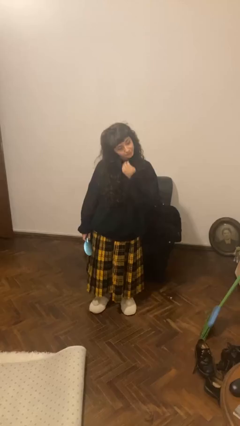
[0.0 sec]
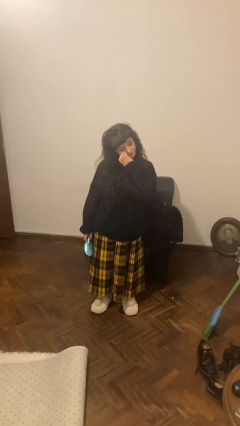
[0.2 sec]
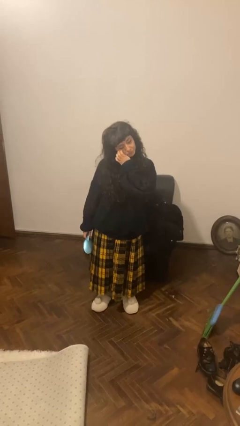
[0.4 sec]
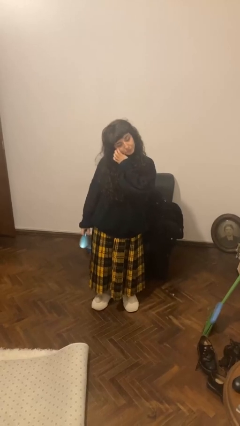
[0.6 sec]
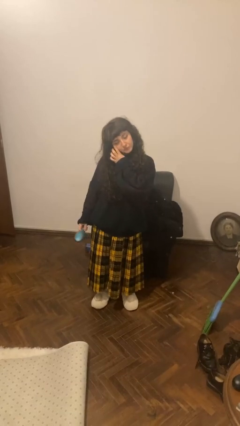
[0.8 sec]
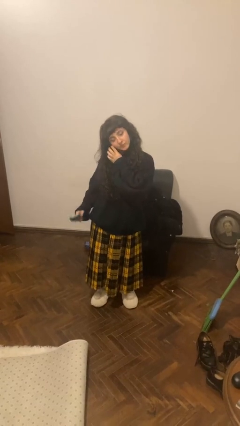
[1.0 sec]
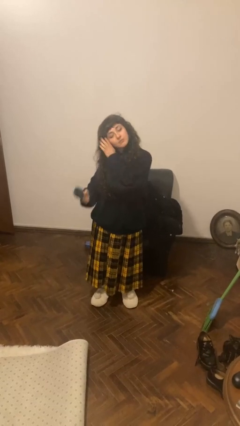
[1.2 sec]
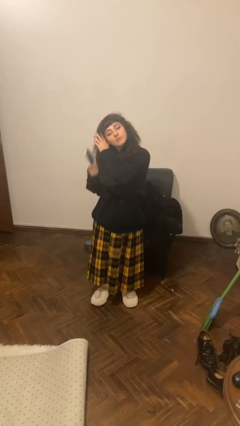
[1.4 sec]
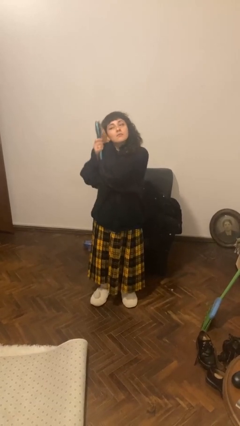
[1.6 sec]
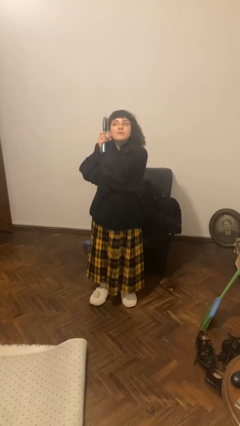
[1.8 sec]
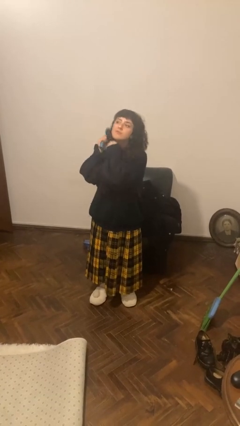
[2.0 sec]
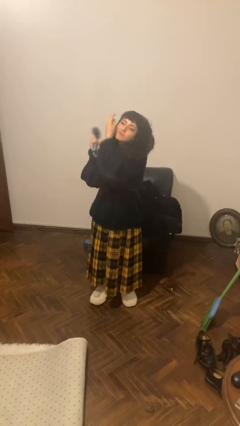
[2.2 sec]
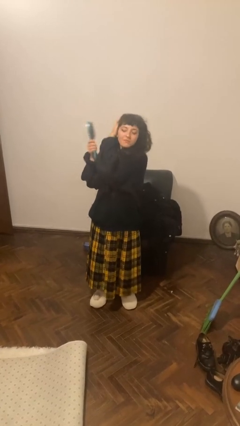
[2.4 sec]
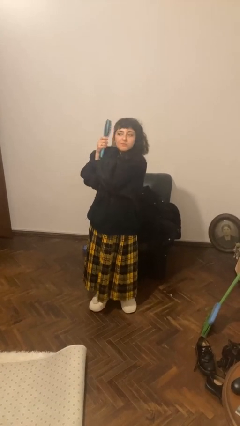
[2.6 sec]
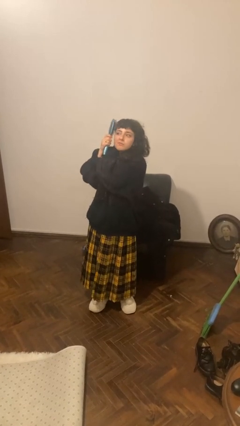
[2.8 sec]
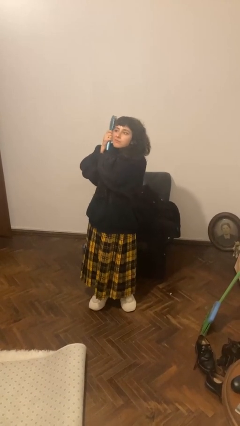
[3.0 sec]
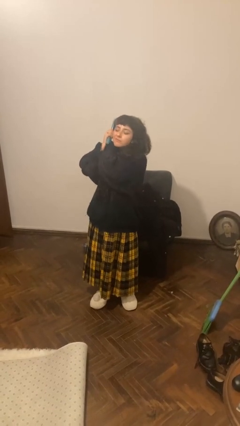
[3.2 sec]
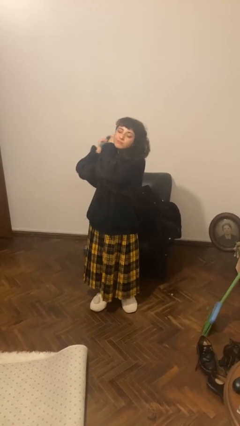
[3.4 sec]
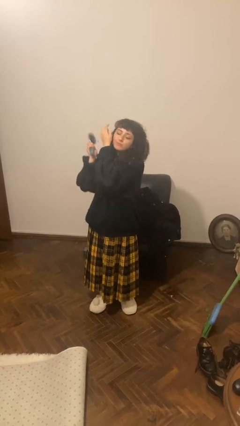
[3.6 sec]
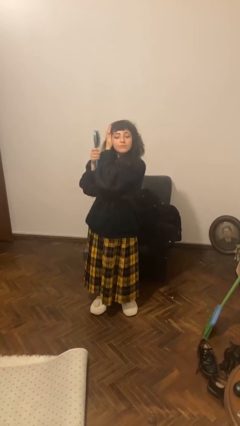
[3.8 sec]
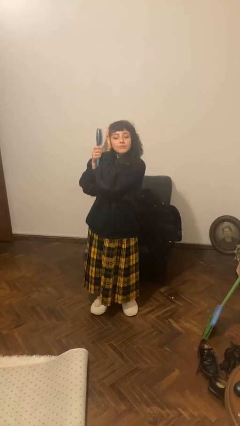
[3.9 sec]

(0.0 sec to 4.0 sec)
person brushes hair

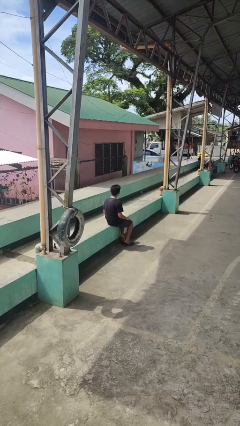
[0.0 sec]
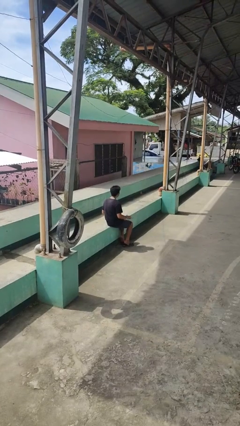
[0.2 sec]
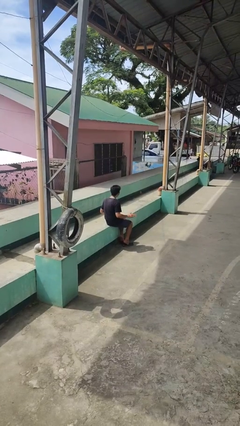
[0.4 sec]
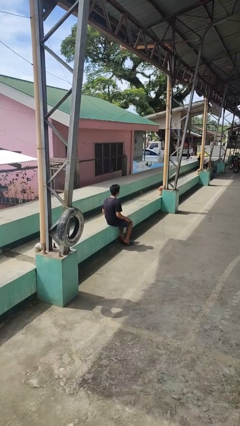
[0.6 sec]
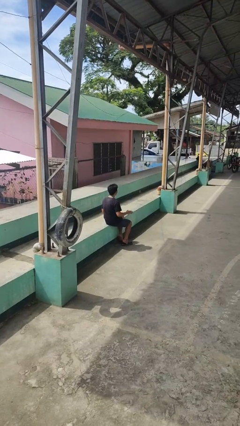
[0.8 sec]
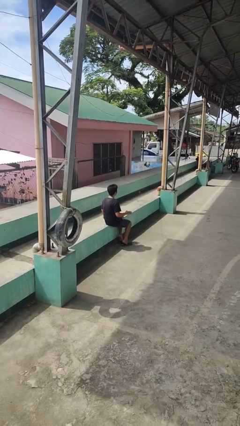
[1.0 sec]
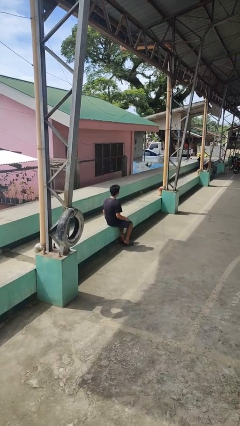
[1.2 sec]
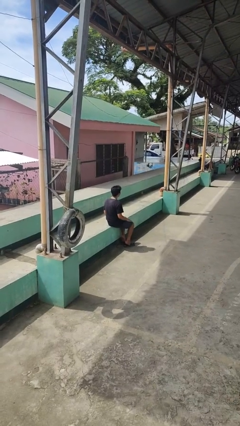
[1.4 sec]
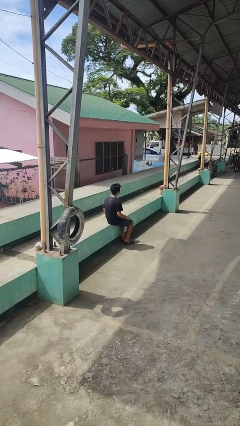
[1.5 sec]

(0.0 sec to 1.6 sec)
person slaps hands on thighs

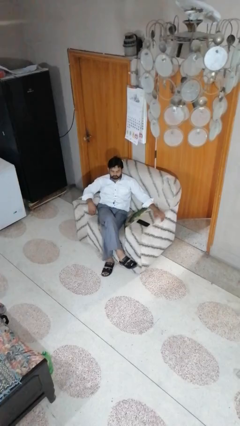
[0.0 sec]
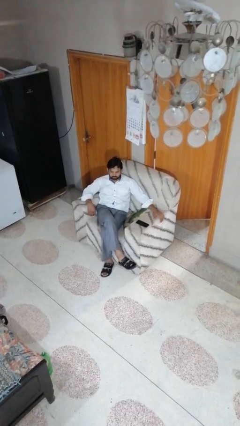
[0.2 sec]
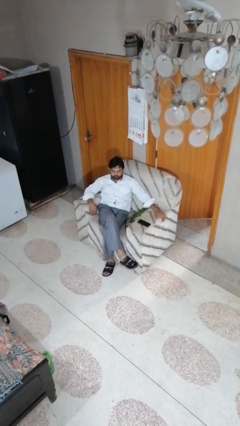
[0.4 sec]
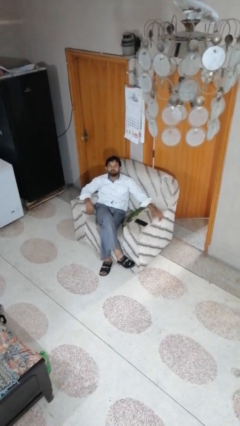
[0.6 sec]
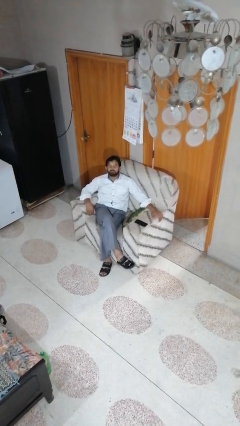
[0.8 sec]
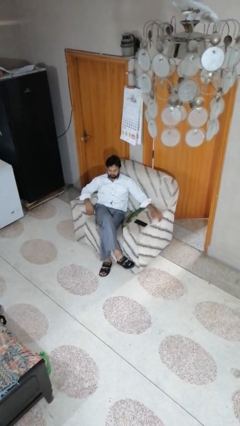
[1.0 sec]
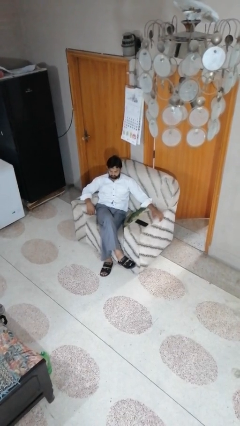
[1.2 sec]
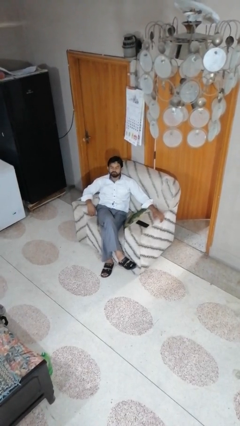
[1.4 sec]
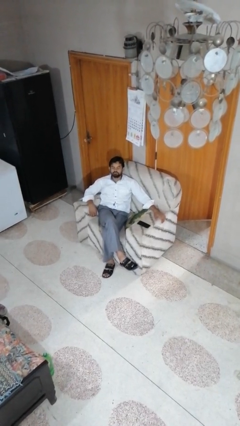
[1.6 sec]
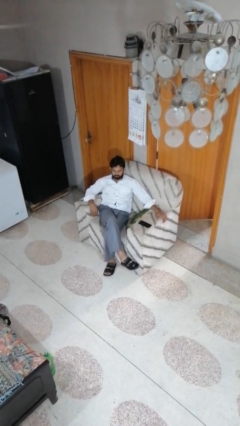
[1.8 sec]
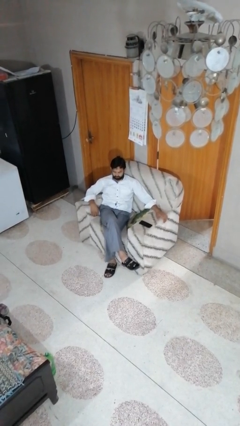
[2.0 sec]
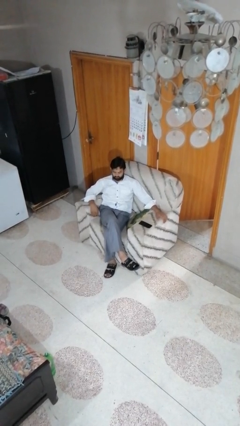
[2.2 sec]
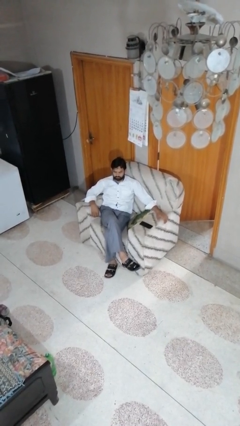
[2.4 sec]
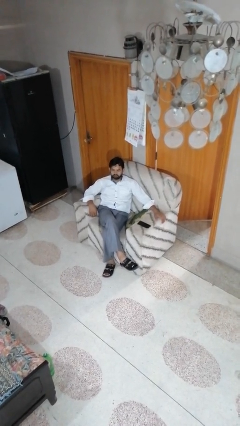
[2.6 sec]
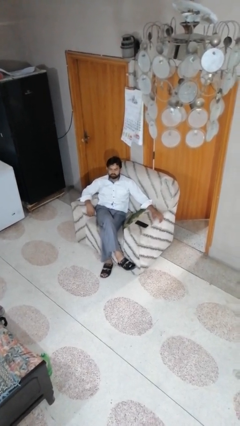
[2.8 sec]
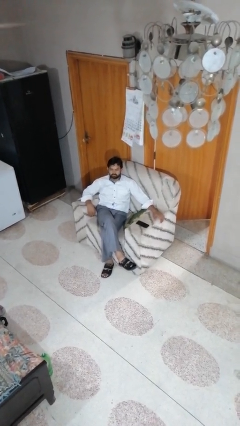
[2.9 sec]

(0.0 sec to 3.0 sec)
person nods head

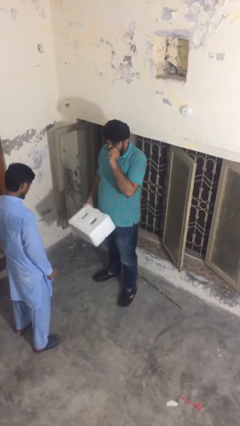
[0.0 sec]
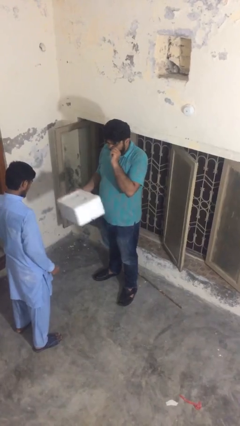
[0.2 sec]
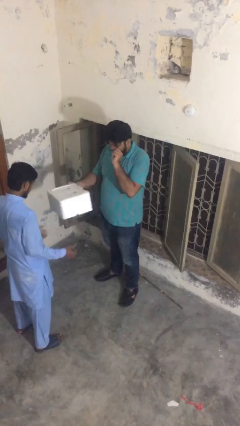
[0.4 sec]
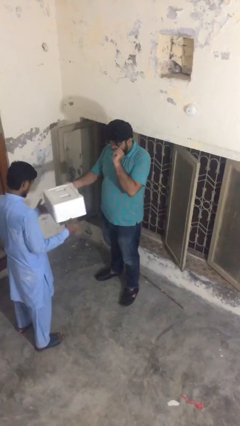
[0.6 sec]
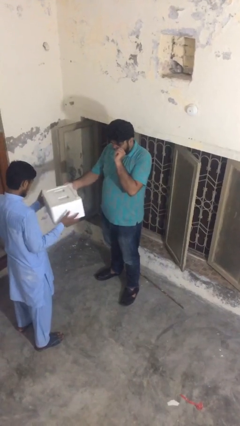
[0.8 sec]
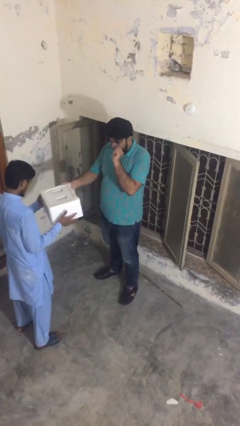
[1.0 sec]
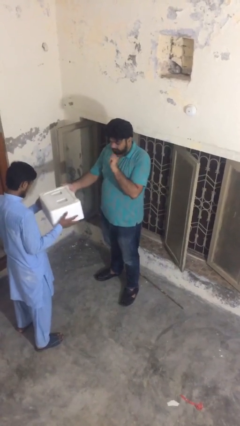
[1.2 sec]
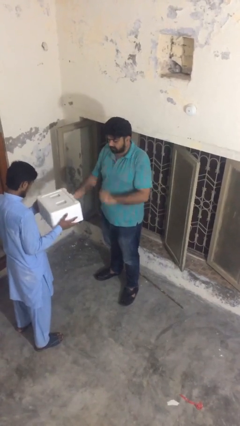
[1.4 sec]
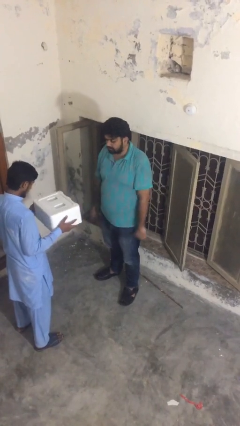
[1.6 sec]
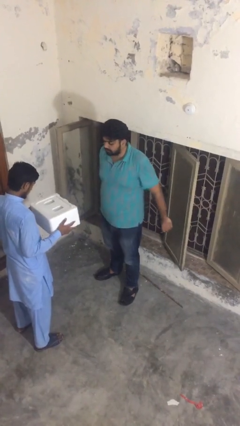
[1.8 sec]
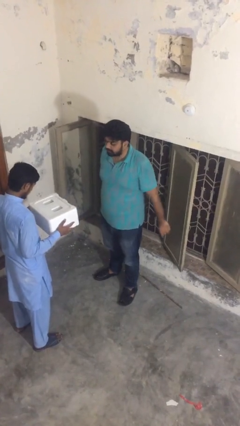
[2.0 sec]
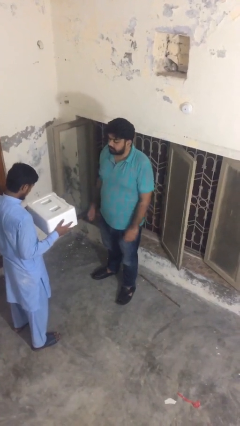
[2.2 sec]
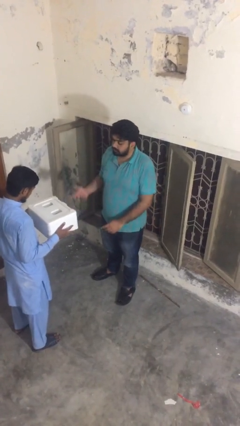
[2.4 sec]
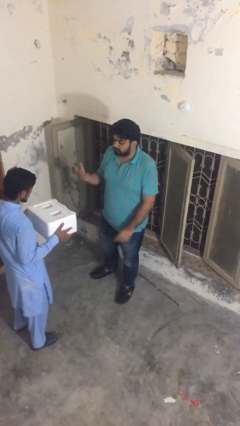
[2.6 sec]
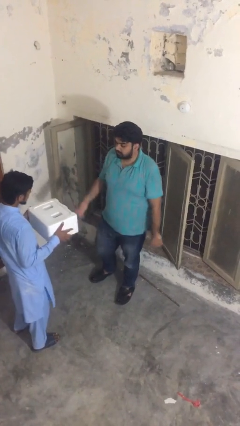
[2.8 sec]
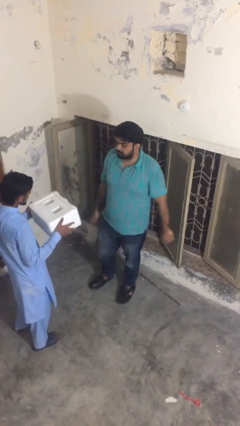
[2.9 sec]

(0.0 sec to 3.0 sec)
person transfers object to person

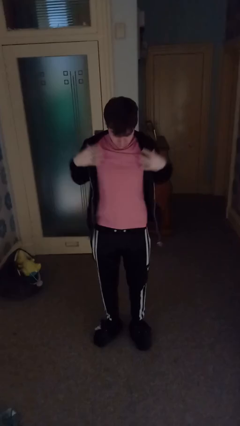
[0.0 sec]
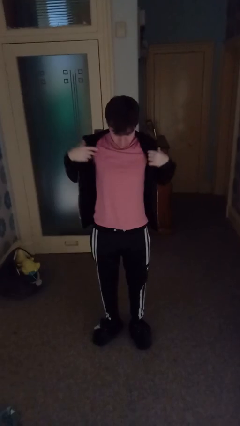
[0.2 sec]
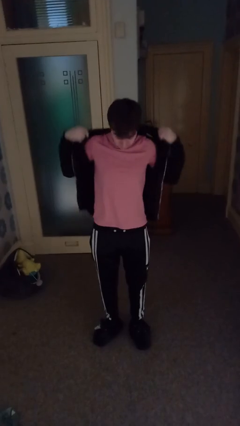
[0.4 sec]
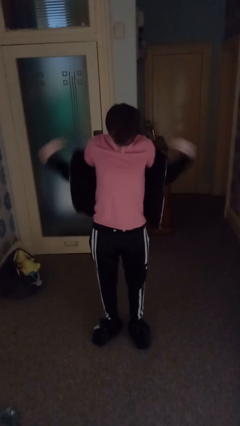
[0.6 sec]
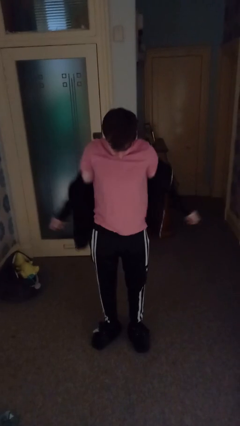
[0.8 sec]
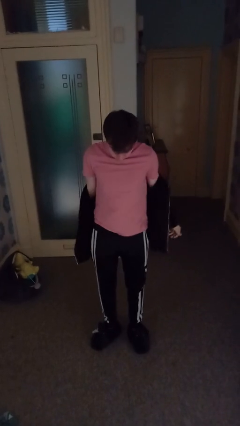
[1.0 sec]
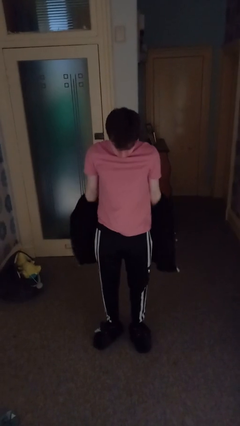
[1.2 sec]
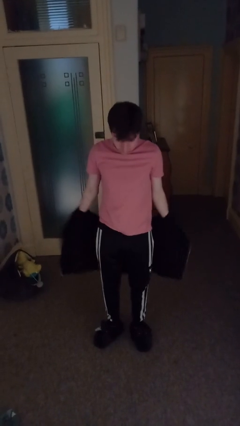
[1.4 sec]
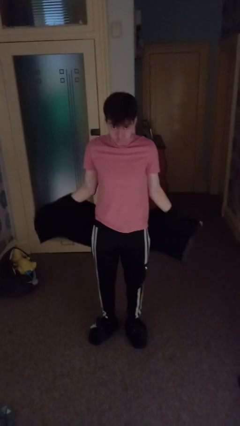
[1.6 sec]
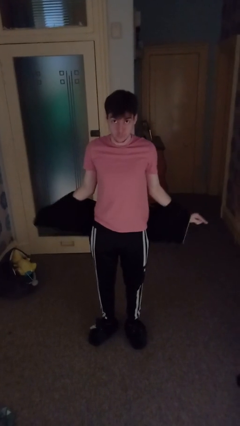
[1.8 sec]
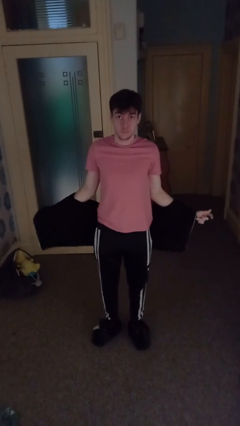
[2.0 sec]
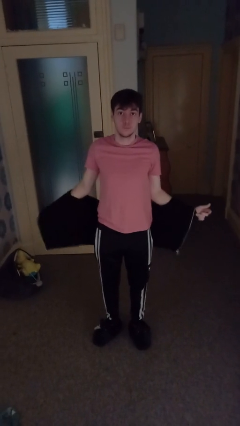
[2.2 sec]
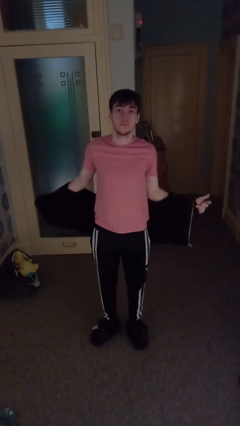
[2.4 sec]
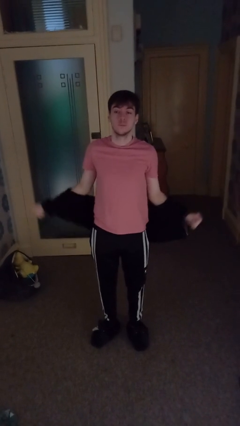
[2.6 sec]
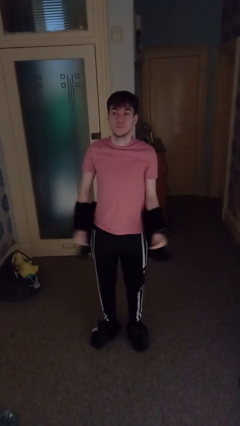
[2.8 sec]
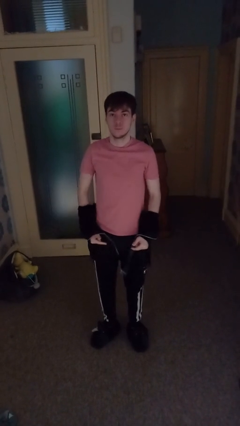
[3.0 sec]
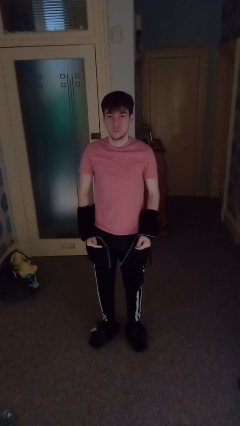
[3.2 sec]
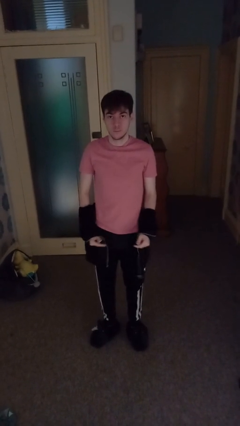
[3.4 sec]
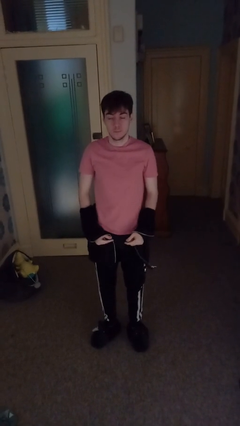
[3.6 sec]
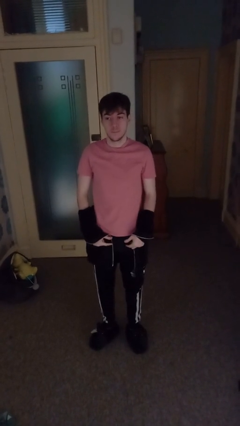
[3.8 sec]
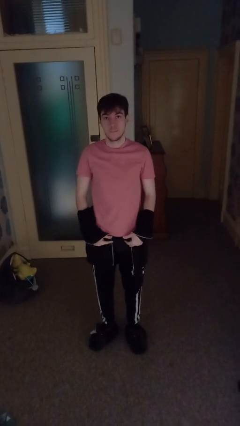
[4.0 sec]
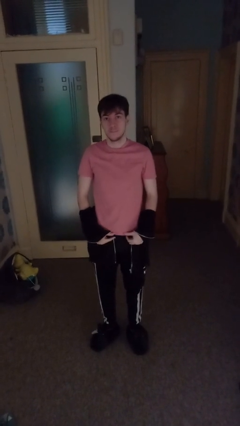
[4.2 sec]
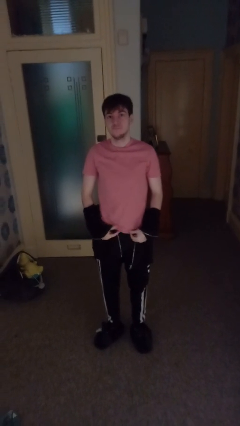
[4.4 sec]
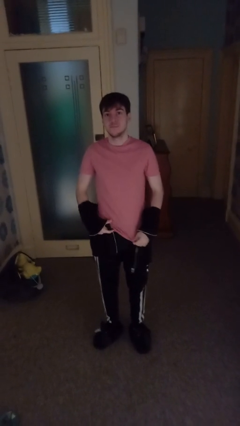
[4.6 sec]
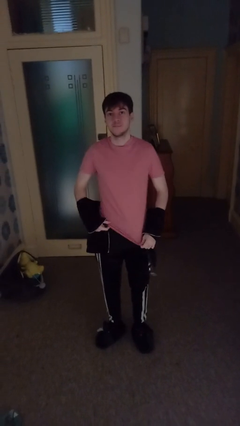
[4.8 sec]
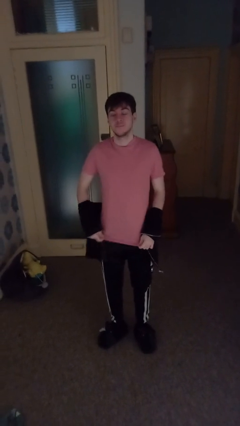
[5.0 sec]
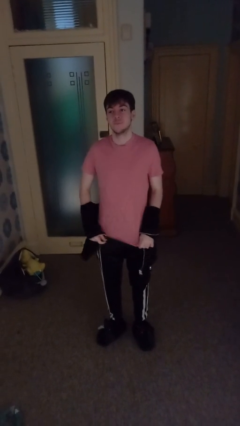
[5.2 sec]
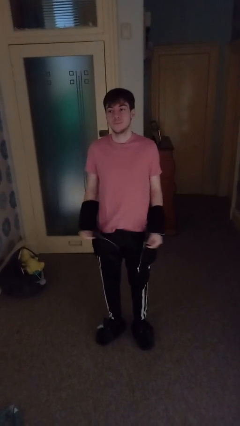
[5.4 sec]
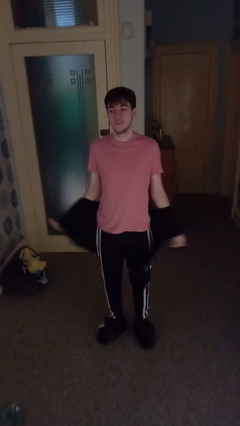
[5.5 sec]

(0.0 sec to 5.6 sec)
person takes off hoodie

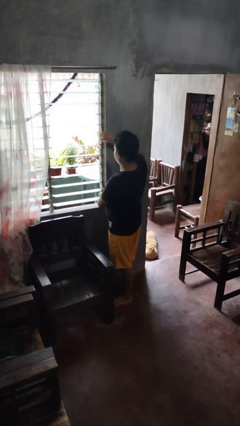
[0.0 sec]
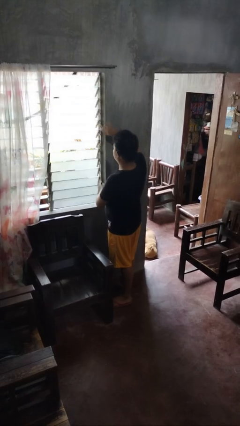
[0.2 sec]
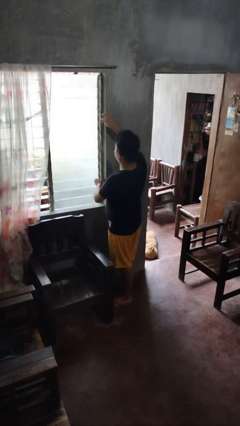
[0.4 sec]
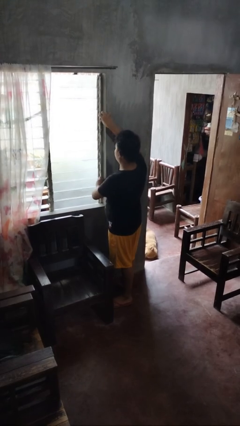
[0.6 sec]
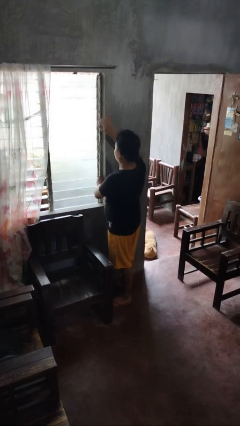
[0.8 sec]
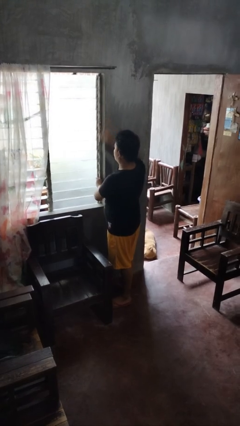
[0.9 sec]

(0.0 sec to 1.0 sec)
person closes home window
